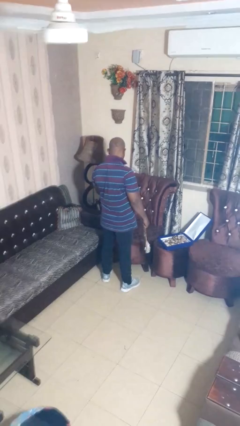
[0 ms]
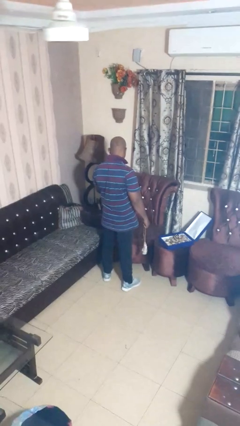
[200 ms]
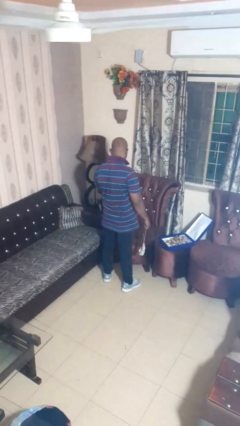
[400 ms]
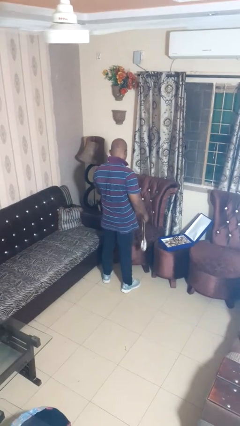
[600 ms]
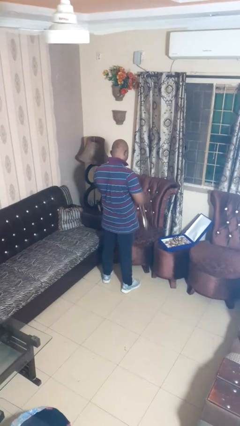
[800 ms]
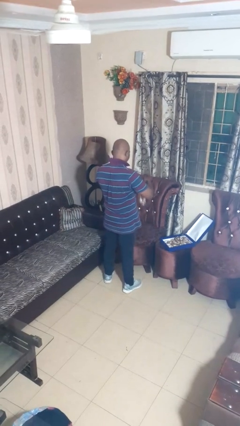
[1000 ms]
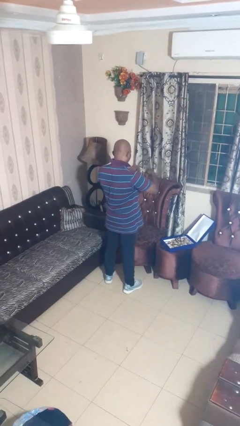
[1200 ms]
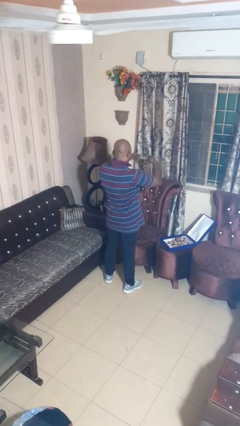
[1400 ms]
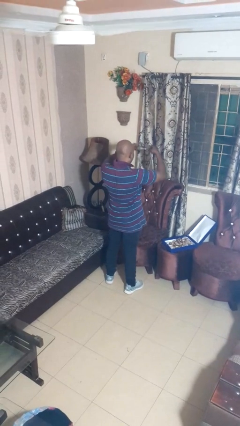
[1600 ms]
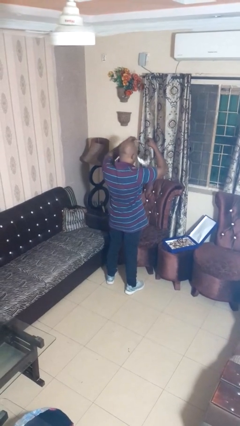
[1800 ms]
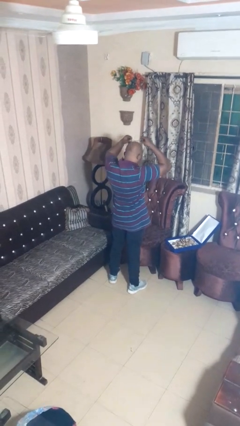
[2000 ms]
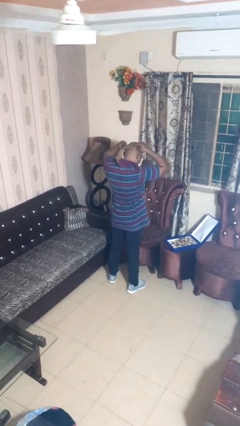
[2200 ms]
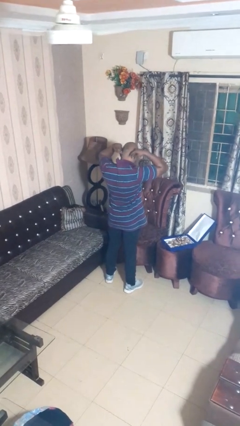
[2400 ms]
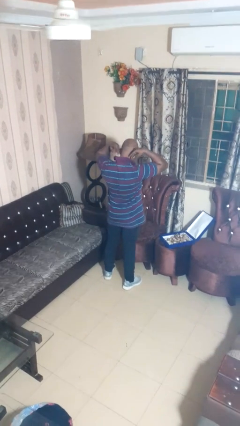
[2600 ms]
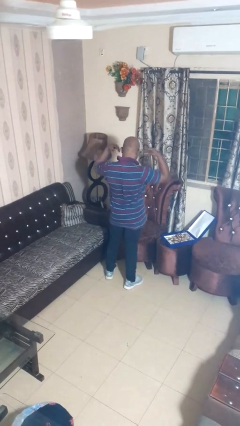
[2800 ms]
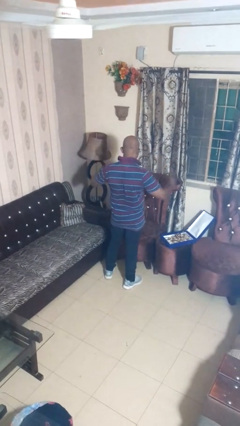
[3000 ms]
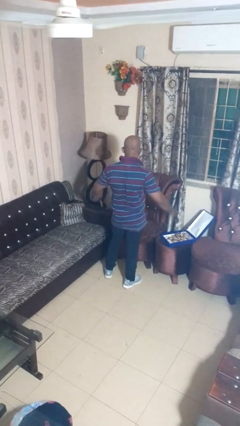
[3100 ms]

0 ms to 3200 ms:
person puts on necklace

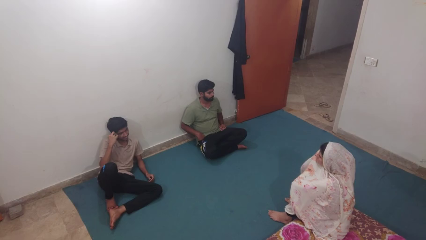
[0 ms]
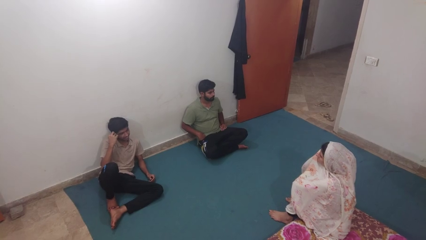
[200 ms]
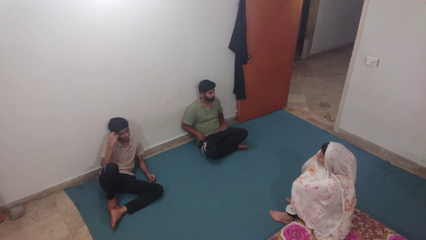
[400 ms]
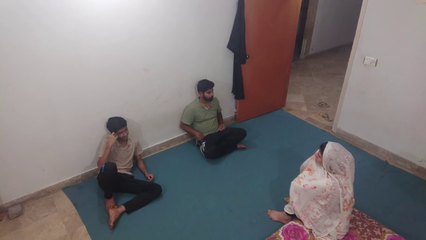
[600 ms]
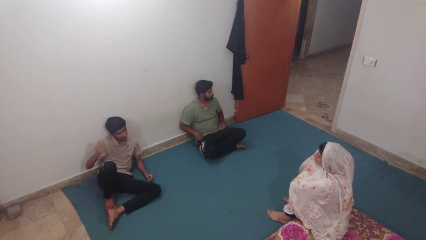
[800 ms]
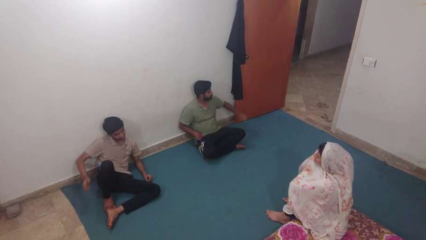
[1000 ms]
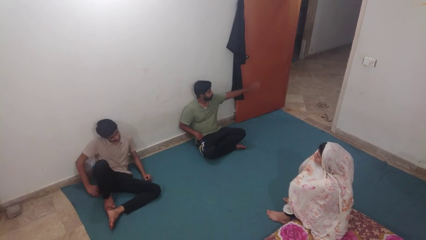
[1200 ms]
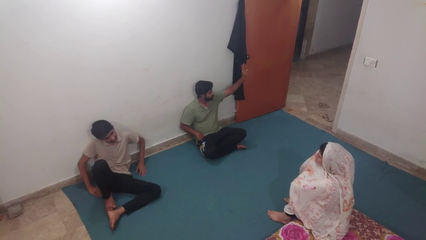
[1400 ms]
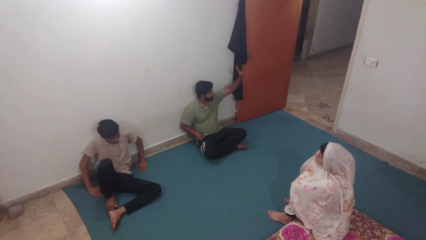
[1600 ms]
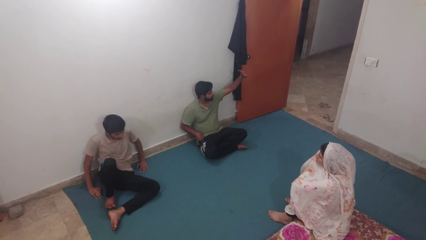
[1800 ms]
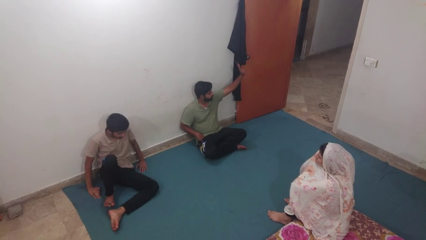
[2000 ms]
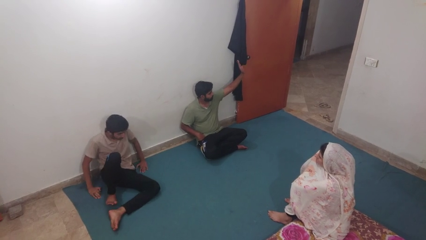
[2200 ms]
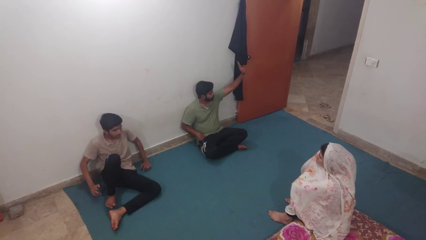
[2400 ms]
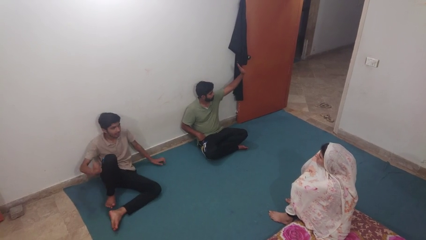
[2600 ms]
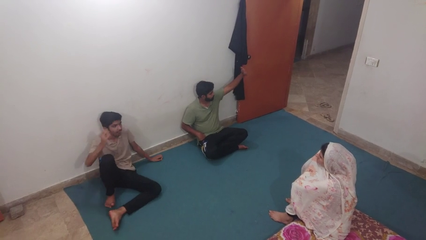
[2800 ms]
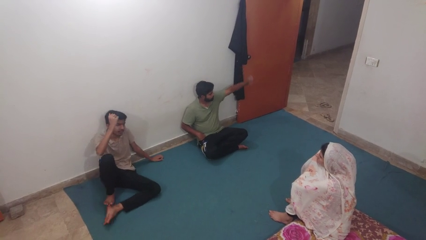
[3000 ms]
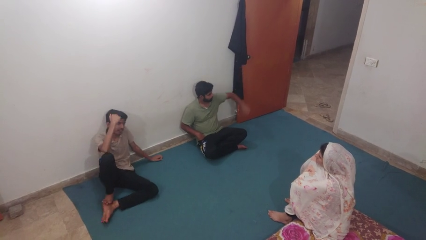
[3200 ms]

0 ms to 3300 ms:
person waves at person

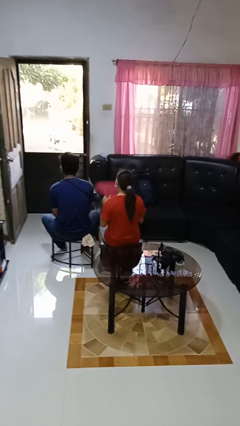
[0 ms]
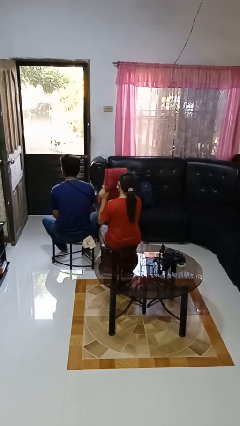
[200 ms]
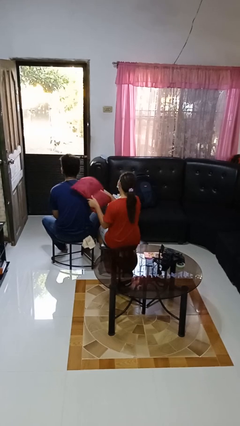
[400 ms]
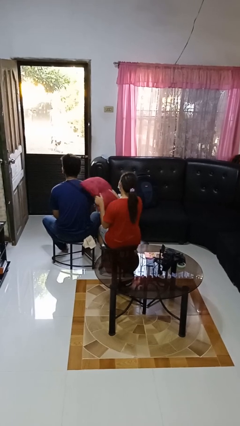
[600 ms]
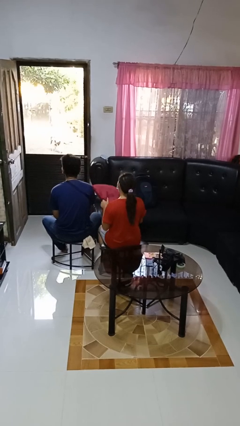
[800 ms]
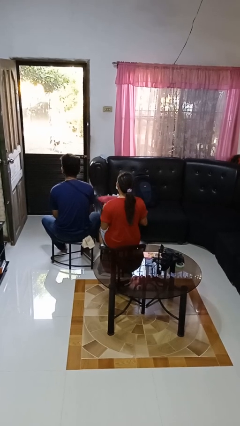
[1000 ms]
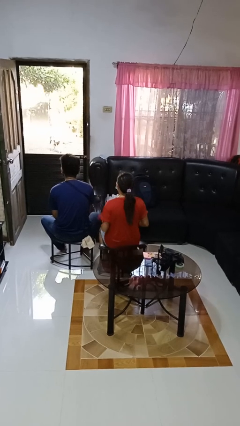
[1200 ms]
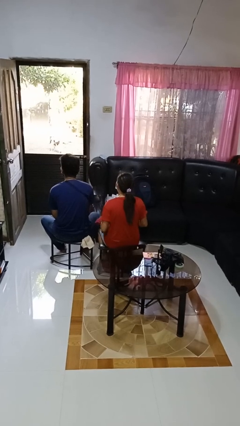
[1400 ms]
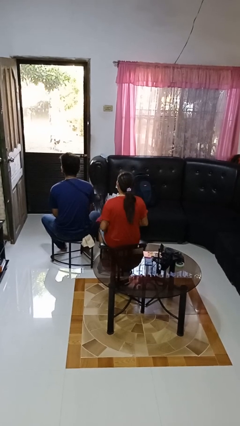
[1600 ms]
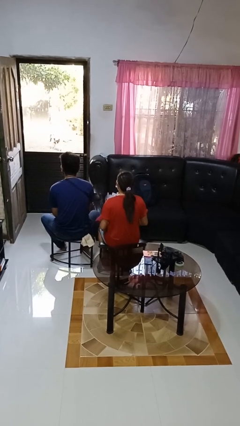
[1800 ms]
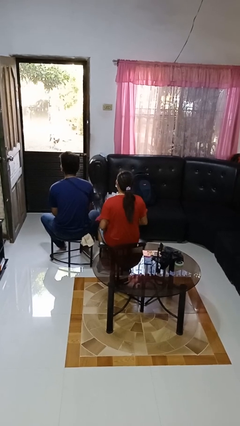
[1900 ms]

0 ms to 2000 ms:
person hits person with pillow

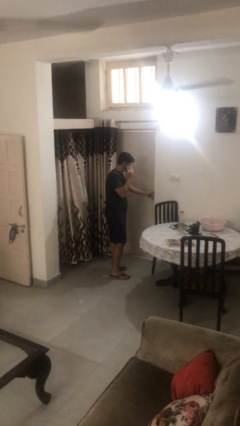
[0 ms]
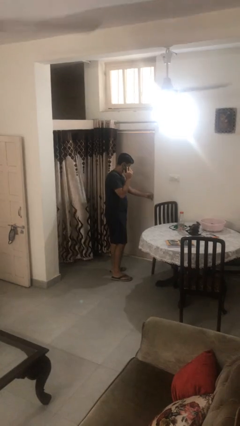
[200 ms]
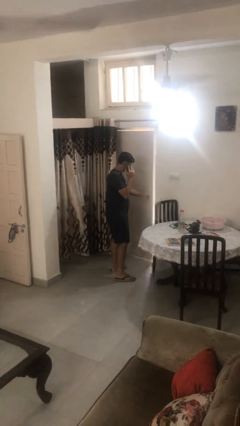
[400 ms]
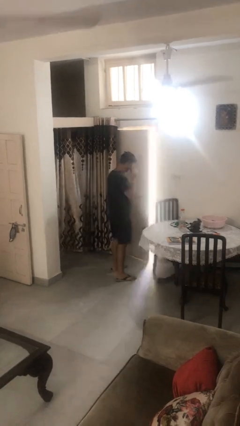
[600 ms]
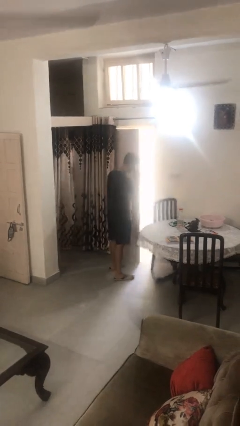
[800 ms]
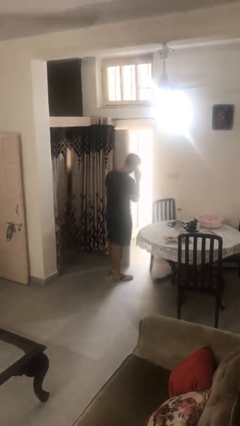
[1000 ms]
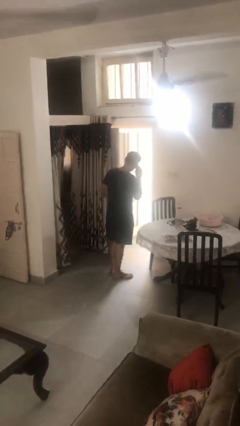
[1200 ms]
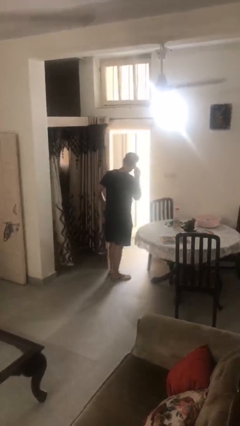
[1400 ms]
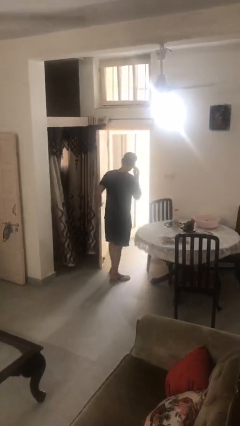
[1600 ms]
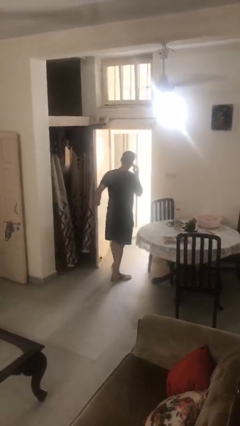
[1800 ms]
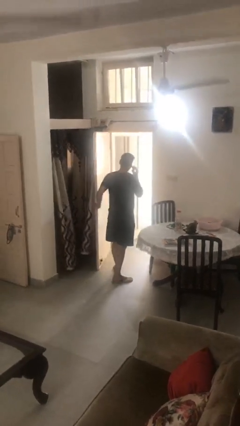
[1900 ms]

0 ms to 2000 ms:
person opens facility door

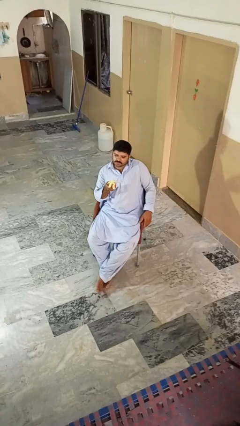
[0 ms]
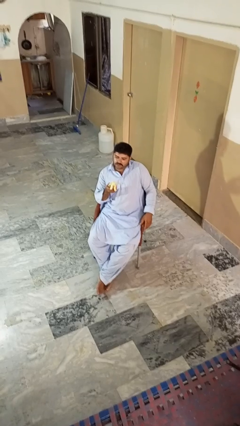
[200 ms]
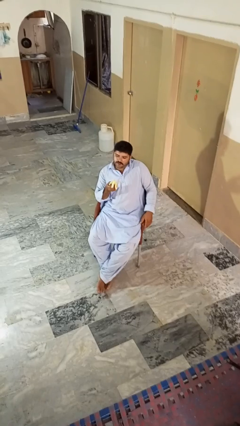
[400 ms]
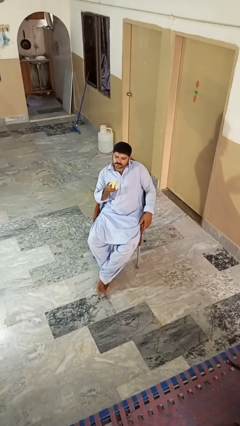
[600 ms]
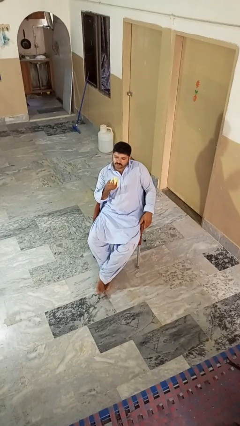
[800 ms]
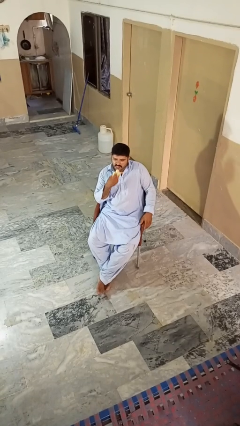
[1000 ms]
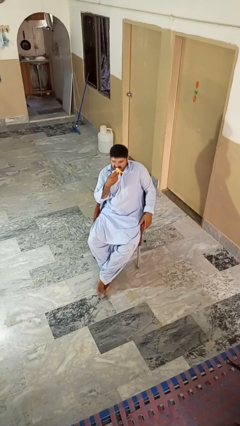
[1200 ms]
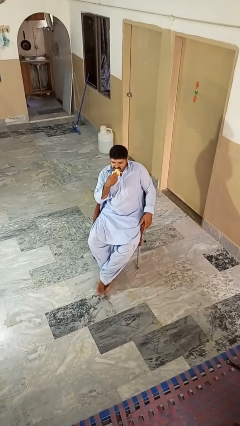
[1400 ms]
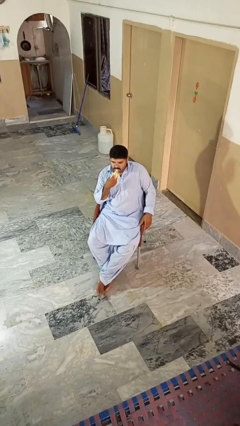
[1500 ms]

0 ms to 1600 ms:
person eats banana

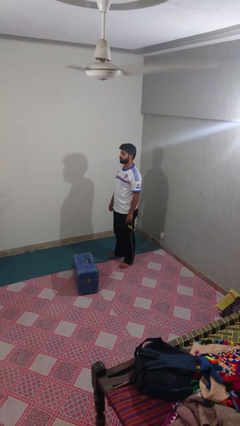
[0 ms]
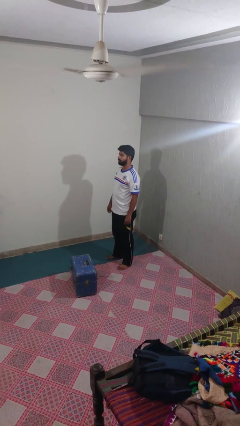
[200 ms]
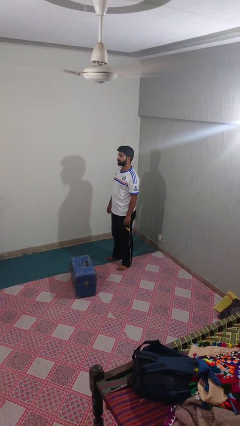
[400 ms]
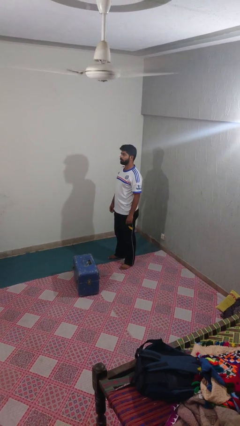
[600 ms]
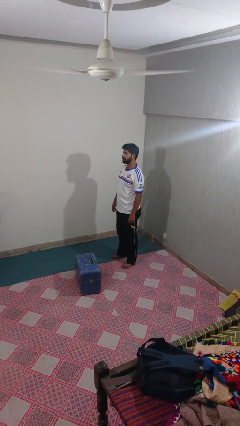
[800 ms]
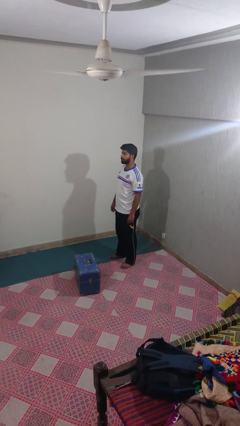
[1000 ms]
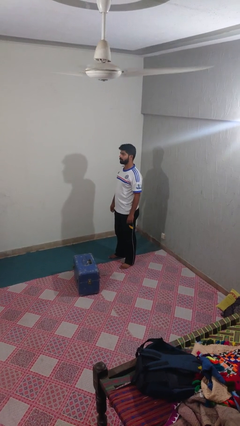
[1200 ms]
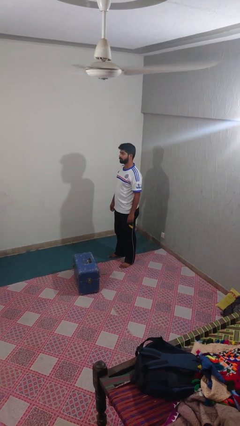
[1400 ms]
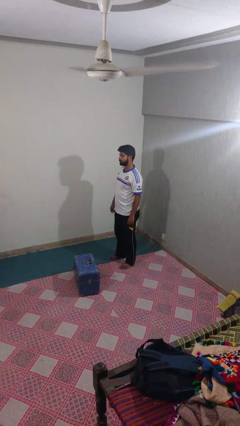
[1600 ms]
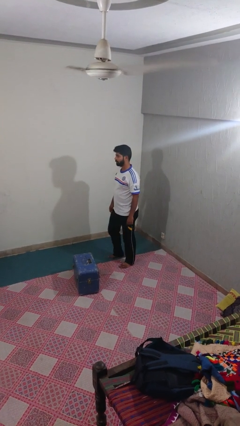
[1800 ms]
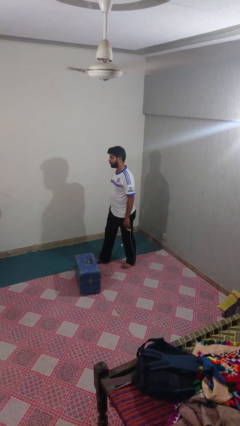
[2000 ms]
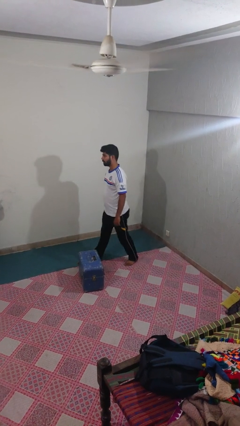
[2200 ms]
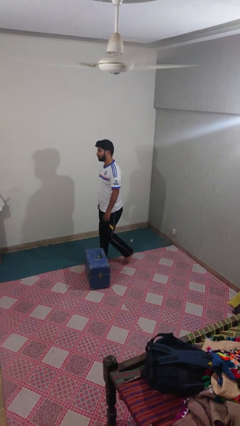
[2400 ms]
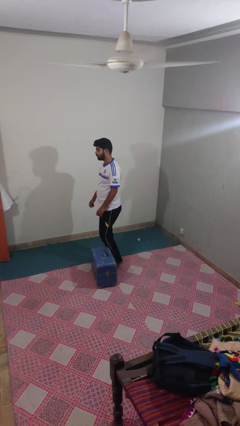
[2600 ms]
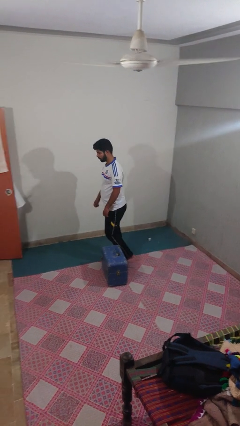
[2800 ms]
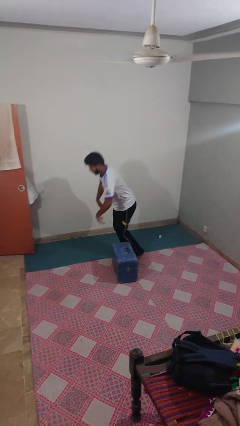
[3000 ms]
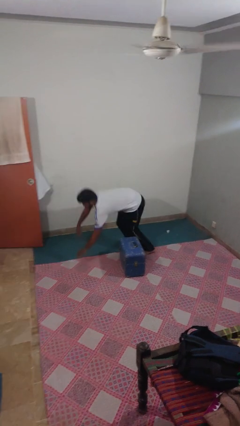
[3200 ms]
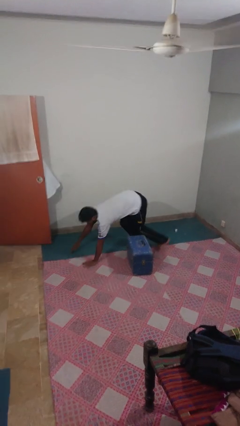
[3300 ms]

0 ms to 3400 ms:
person trips on object on floor

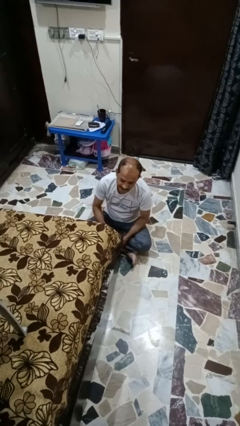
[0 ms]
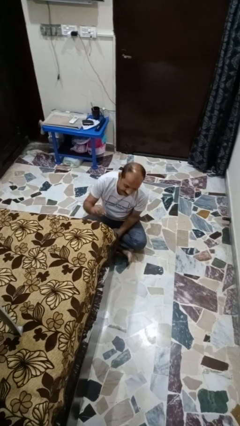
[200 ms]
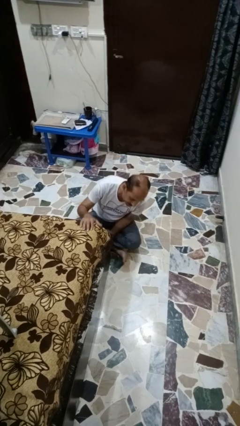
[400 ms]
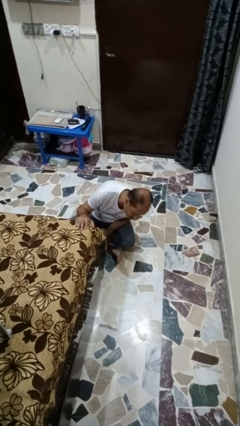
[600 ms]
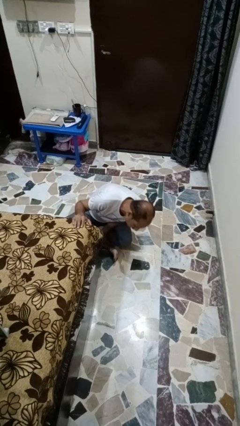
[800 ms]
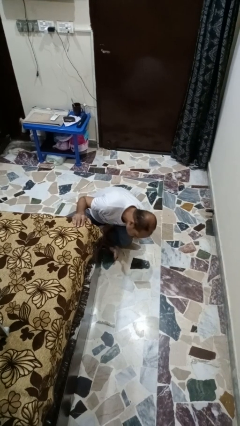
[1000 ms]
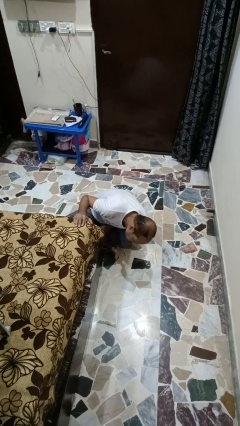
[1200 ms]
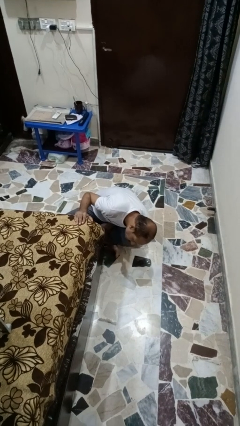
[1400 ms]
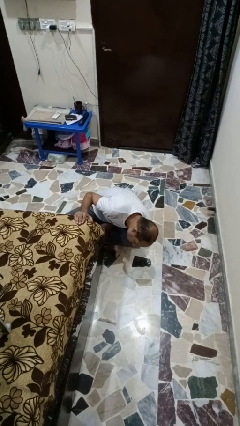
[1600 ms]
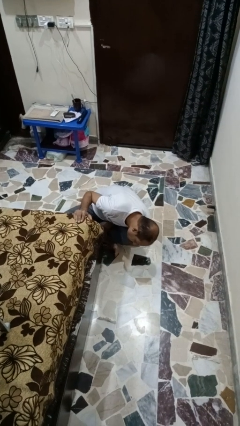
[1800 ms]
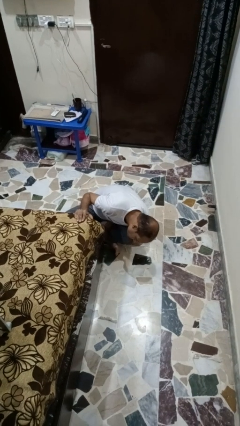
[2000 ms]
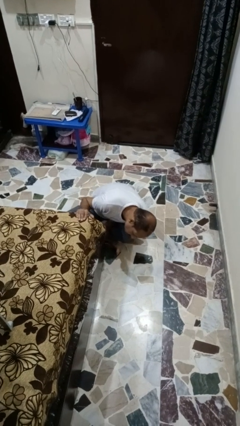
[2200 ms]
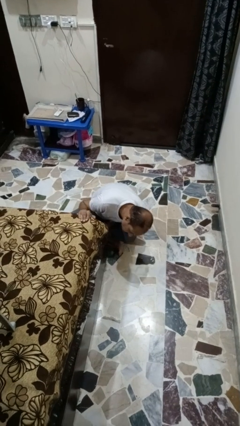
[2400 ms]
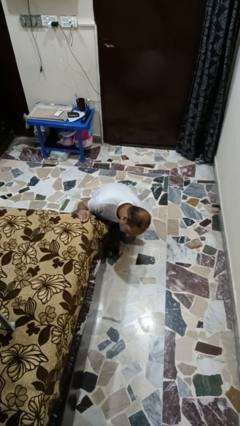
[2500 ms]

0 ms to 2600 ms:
person searches under bed
